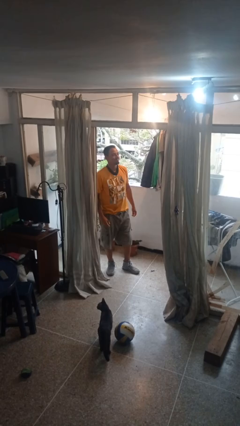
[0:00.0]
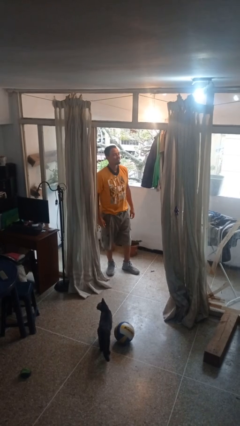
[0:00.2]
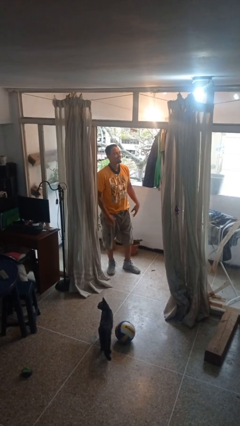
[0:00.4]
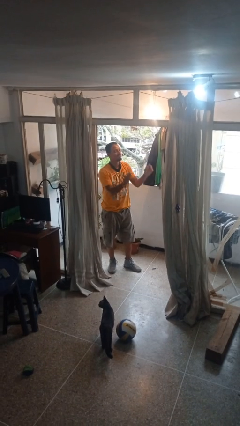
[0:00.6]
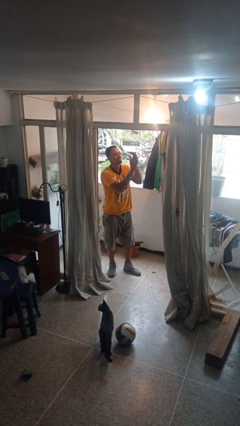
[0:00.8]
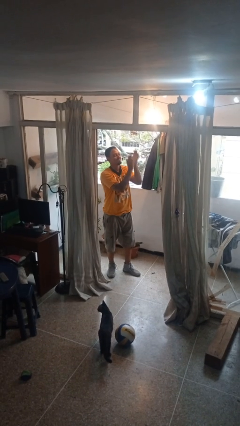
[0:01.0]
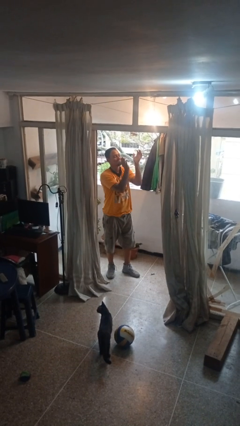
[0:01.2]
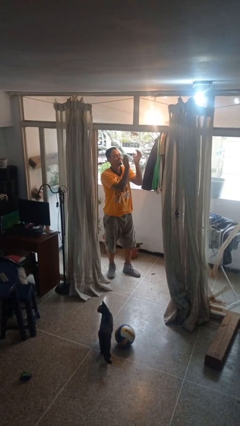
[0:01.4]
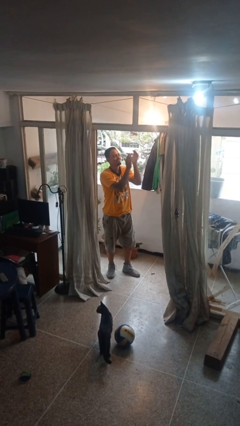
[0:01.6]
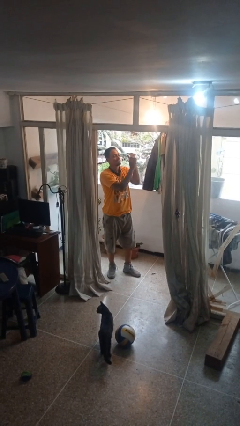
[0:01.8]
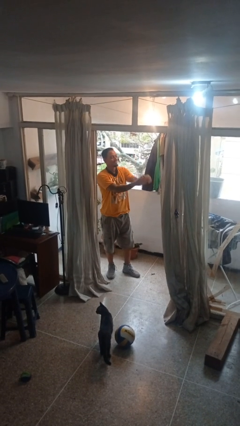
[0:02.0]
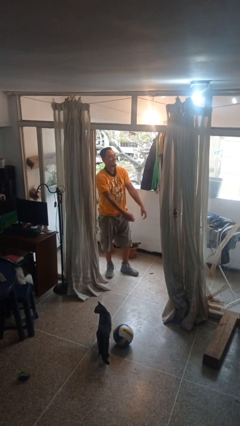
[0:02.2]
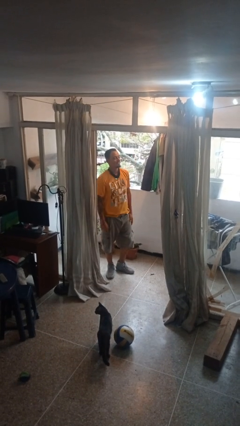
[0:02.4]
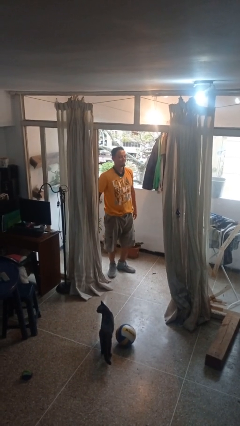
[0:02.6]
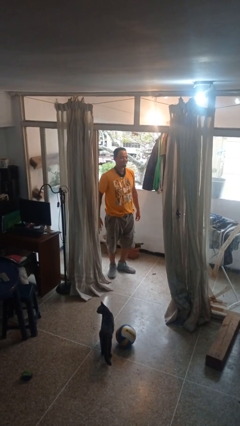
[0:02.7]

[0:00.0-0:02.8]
person claps hands

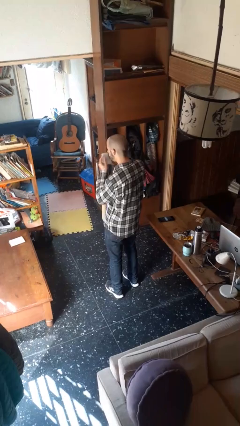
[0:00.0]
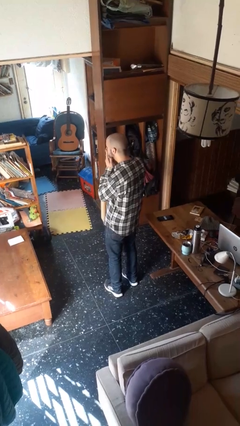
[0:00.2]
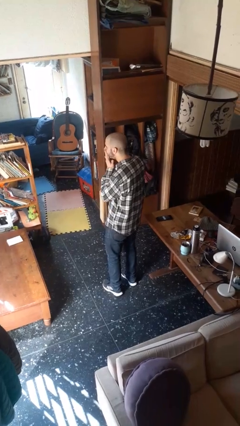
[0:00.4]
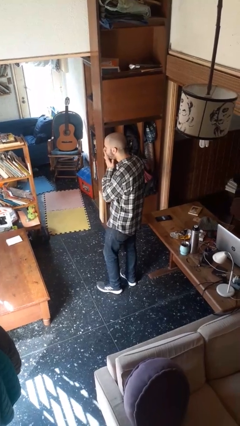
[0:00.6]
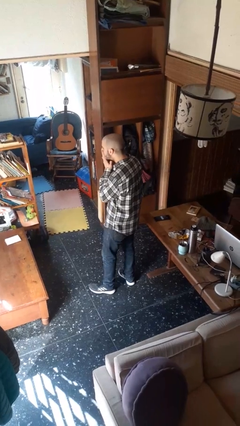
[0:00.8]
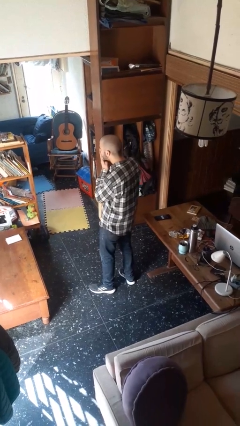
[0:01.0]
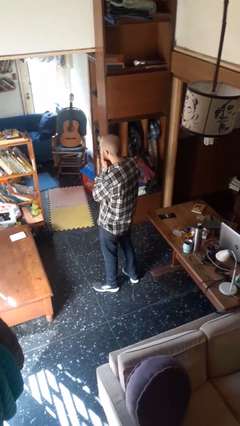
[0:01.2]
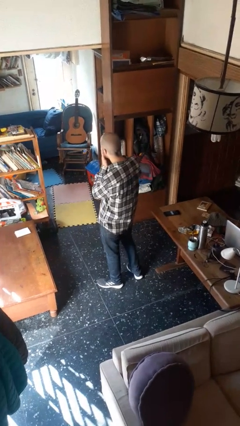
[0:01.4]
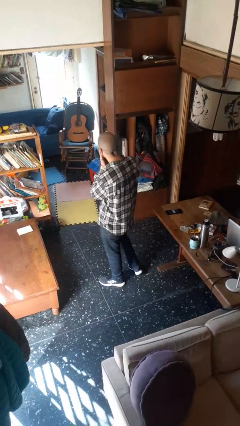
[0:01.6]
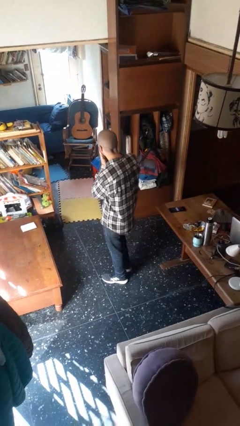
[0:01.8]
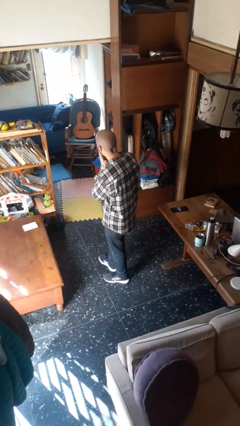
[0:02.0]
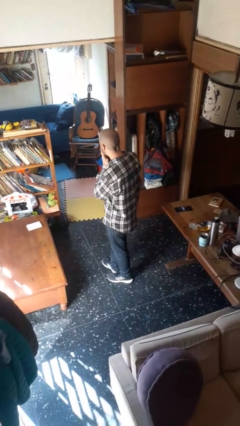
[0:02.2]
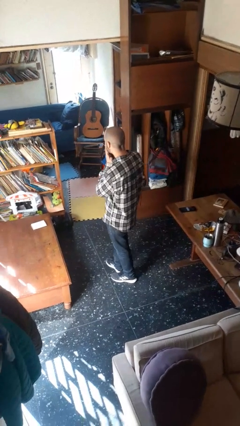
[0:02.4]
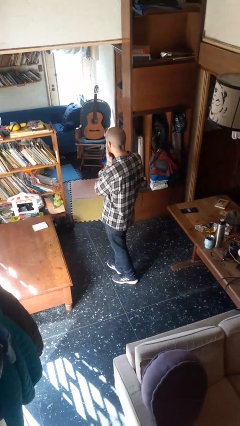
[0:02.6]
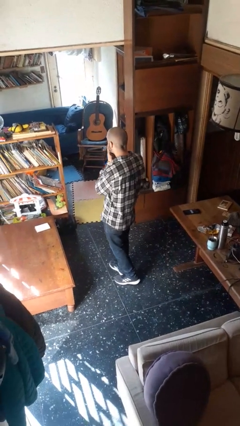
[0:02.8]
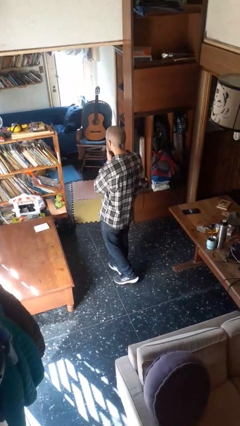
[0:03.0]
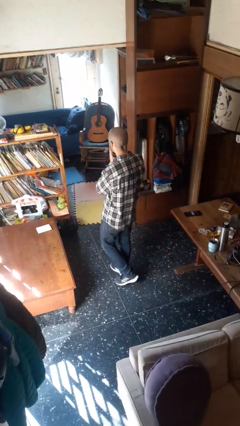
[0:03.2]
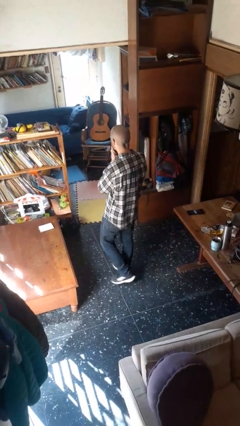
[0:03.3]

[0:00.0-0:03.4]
person wipes mouth with napkin

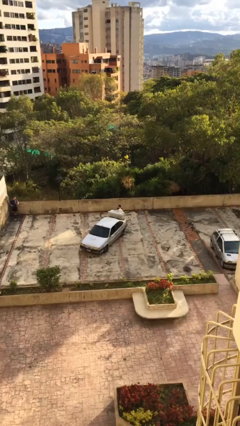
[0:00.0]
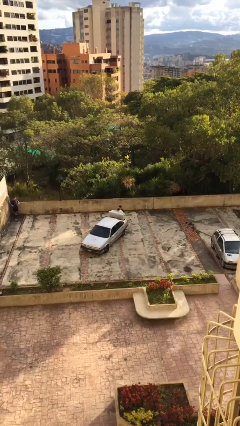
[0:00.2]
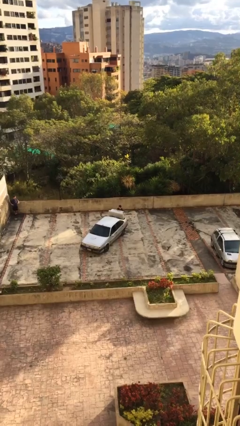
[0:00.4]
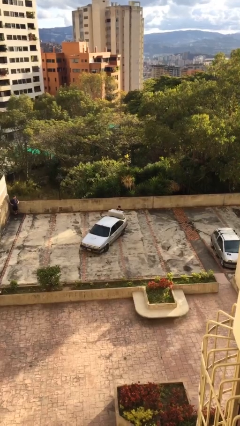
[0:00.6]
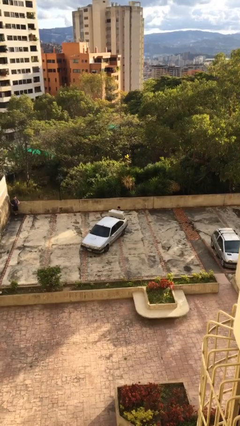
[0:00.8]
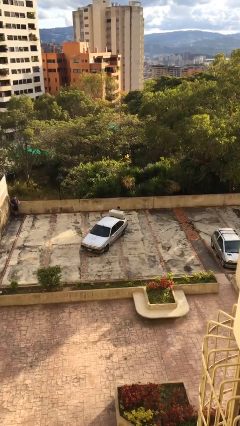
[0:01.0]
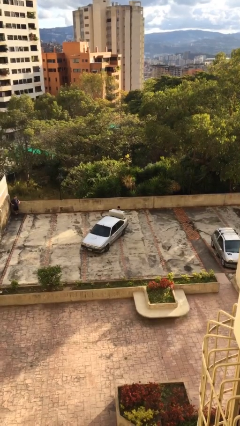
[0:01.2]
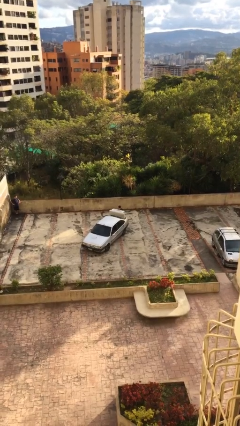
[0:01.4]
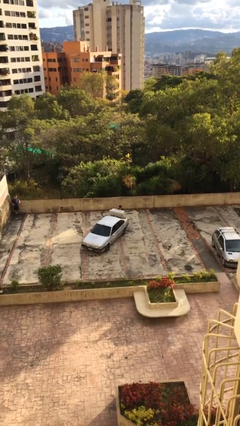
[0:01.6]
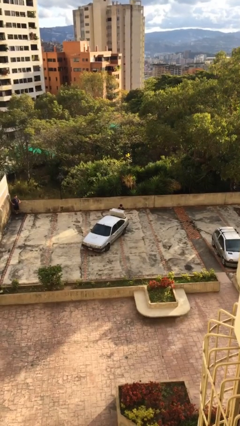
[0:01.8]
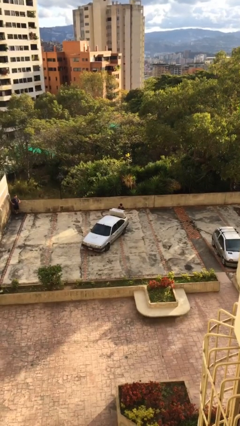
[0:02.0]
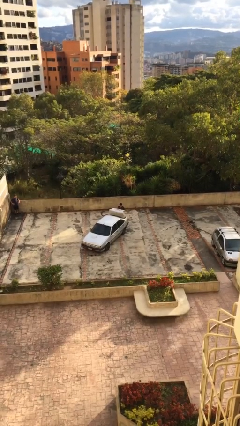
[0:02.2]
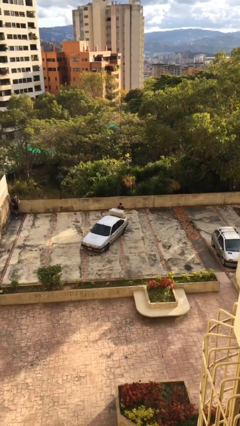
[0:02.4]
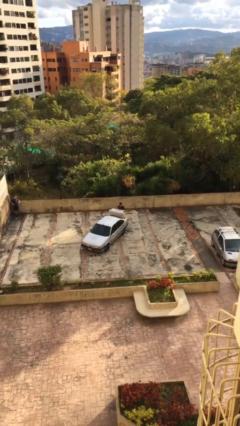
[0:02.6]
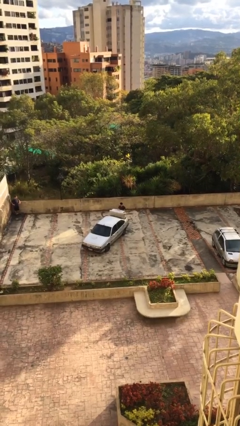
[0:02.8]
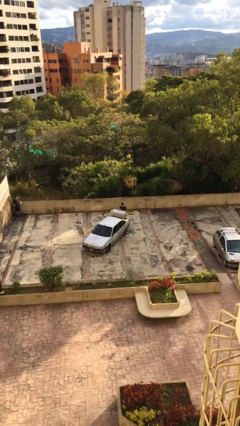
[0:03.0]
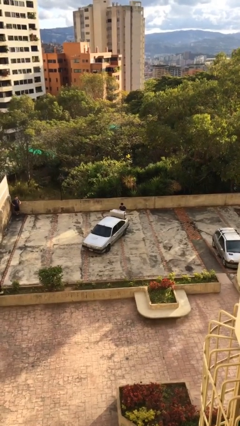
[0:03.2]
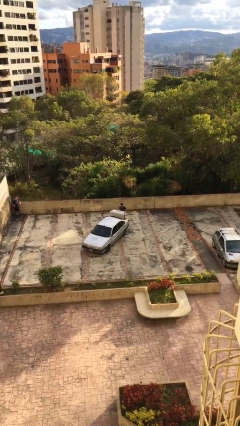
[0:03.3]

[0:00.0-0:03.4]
person loads car

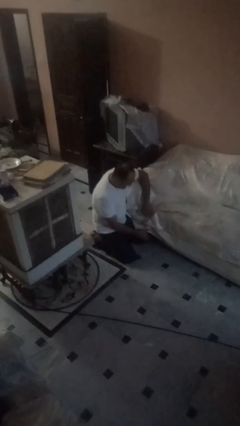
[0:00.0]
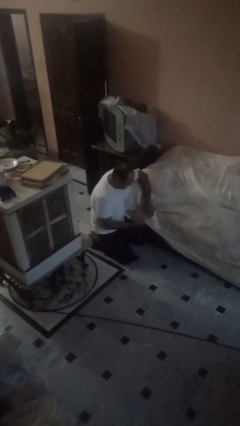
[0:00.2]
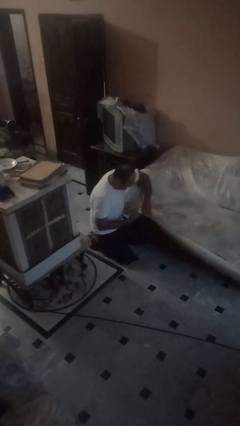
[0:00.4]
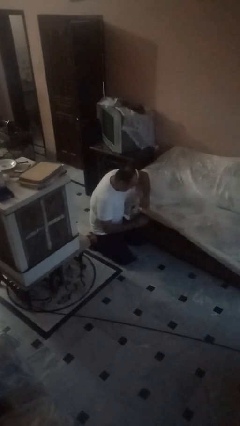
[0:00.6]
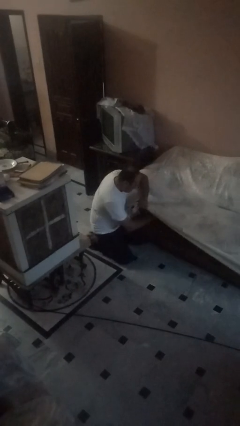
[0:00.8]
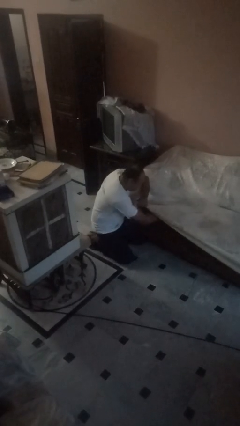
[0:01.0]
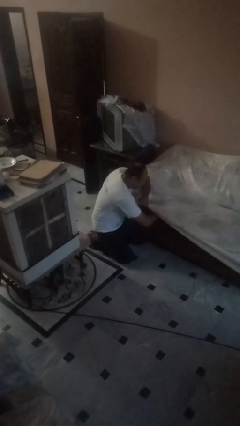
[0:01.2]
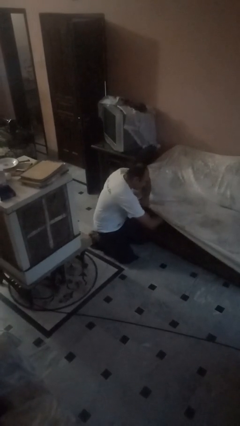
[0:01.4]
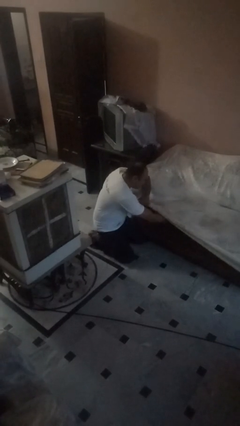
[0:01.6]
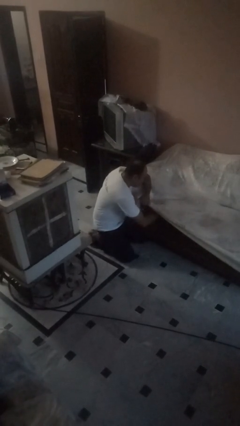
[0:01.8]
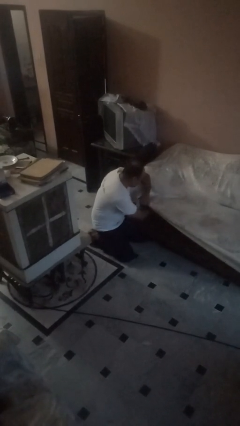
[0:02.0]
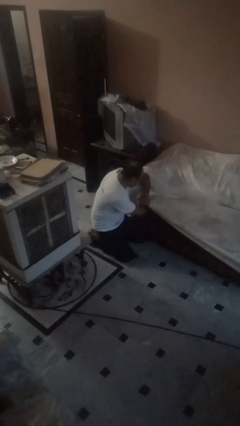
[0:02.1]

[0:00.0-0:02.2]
person searches in couch

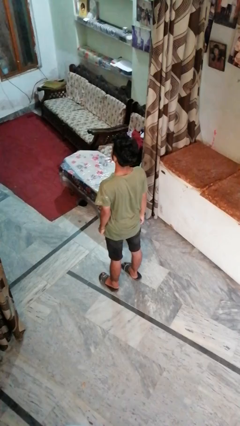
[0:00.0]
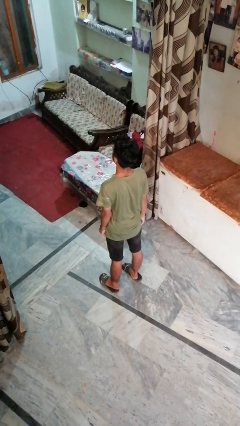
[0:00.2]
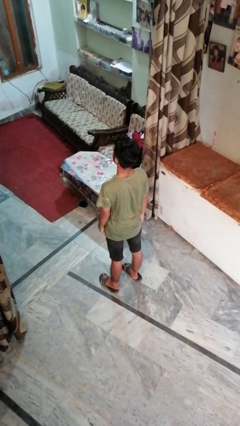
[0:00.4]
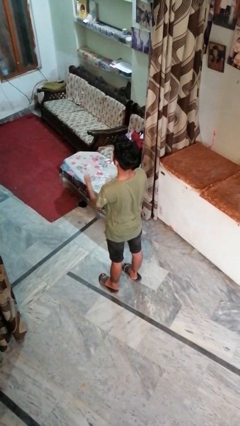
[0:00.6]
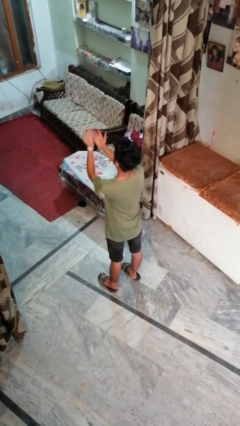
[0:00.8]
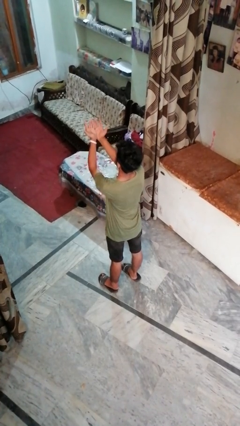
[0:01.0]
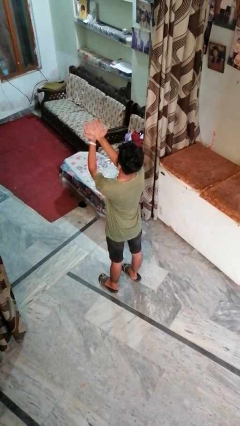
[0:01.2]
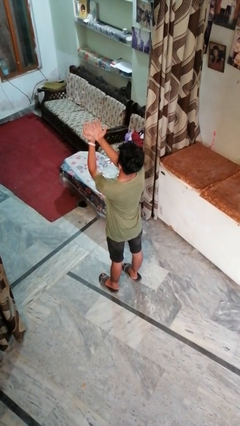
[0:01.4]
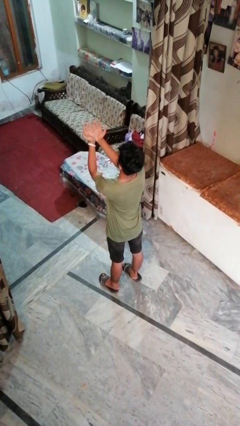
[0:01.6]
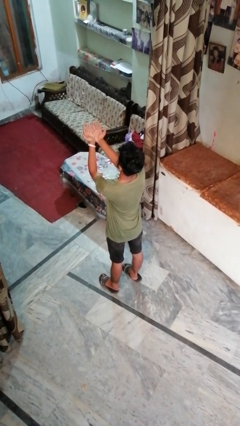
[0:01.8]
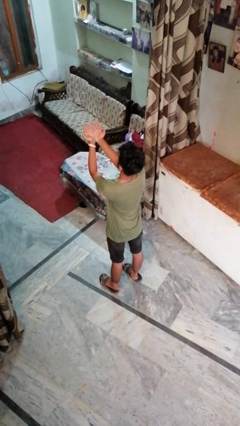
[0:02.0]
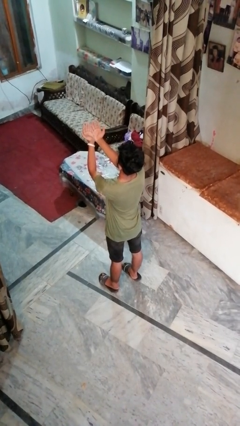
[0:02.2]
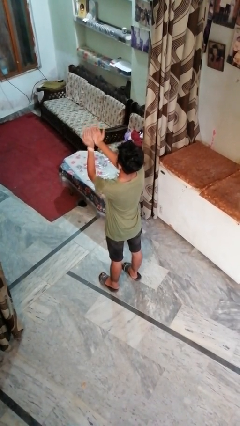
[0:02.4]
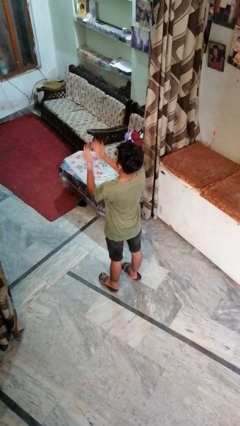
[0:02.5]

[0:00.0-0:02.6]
person prays

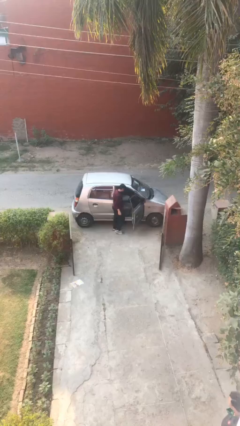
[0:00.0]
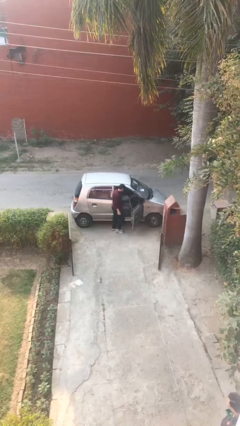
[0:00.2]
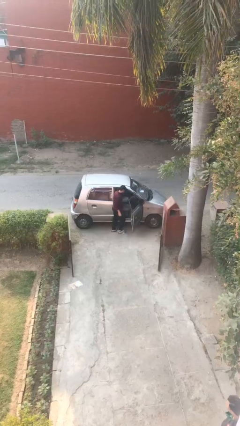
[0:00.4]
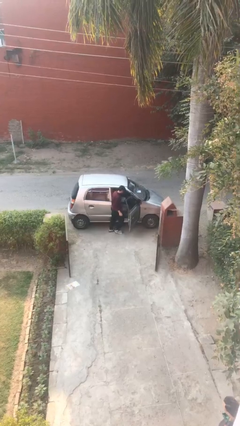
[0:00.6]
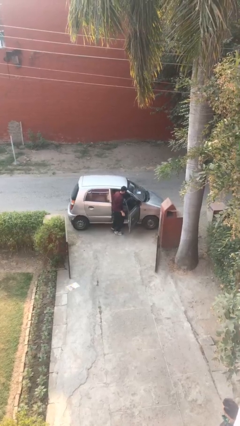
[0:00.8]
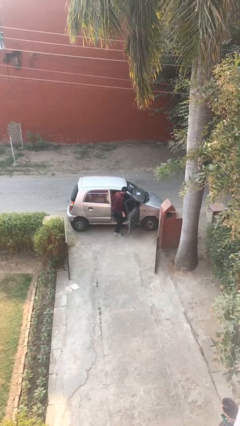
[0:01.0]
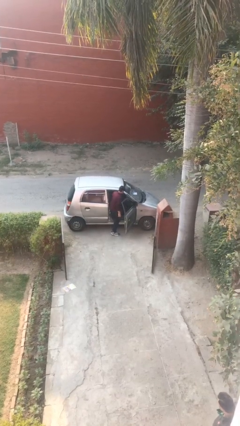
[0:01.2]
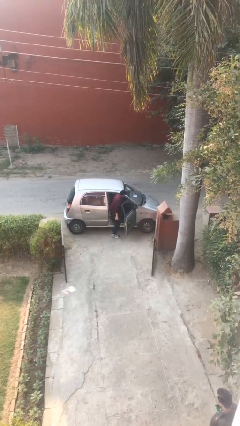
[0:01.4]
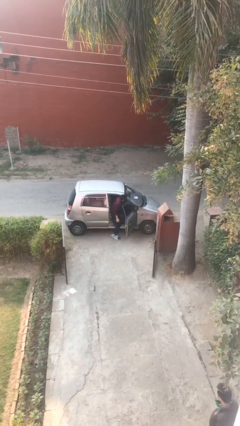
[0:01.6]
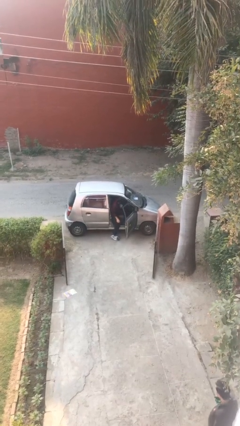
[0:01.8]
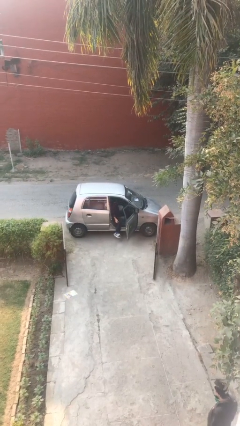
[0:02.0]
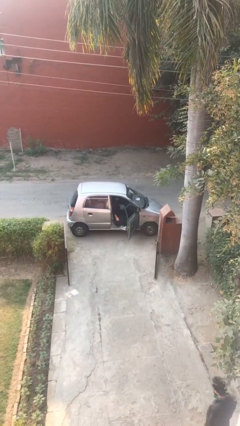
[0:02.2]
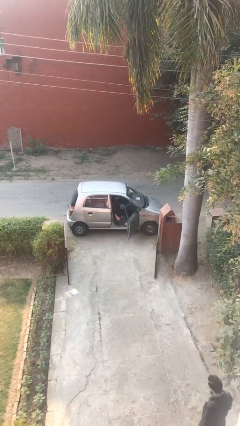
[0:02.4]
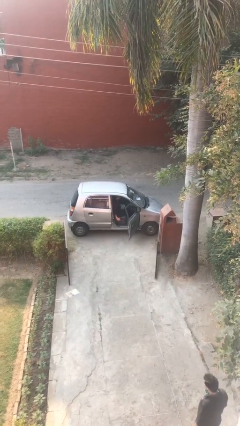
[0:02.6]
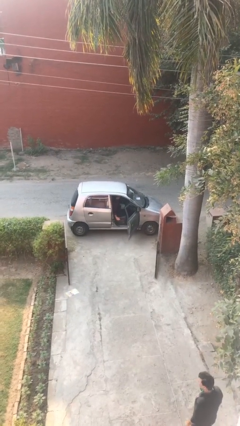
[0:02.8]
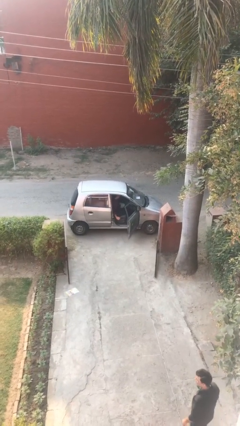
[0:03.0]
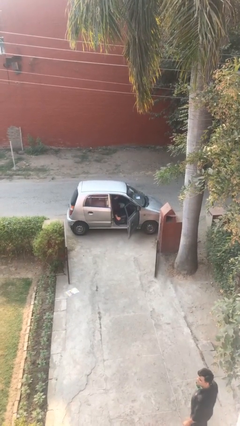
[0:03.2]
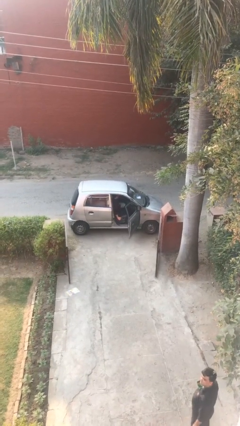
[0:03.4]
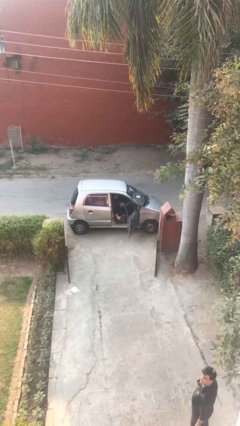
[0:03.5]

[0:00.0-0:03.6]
person enters car
